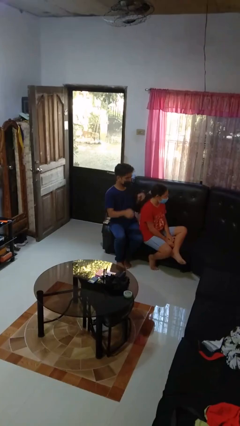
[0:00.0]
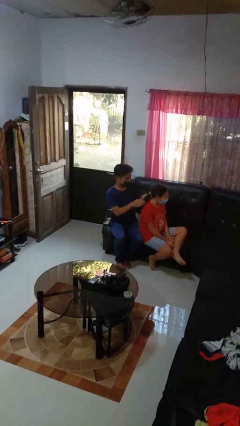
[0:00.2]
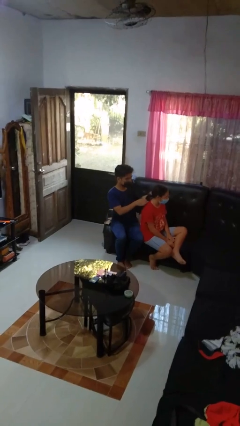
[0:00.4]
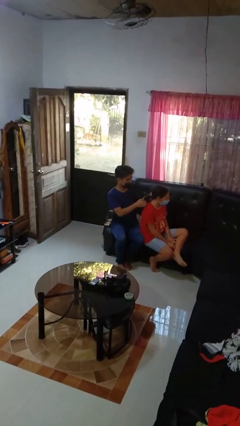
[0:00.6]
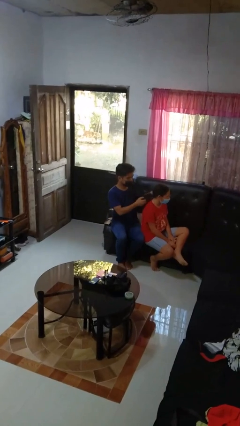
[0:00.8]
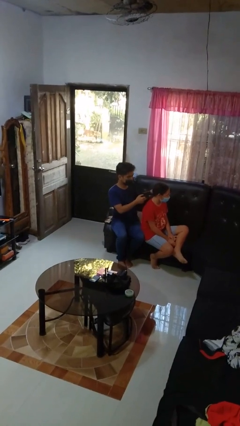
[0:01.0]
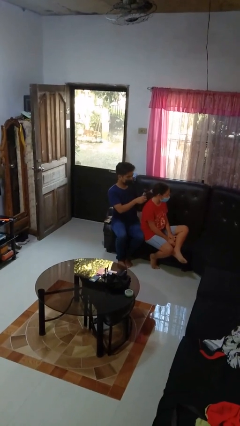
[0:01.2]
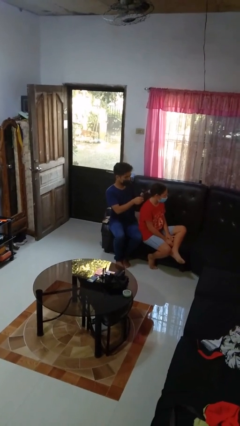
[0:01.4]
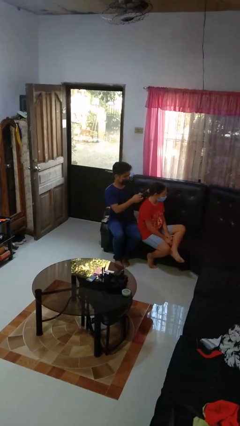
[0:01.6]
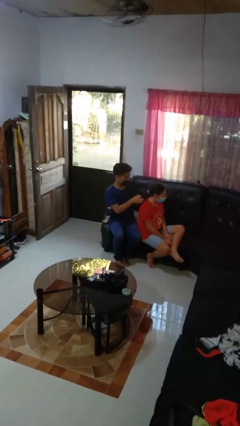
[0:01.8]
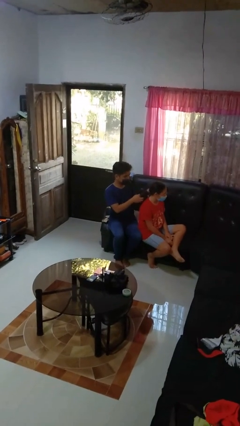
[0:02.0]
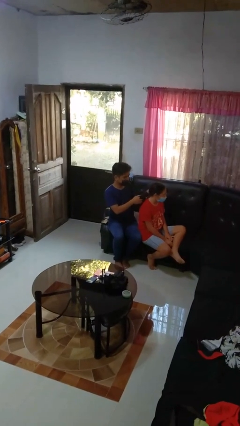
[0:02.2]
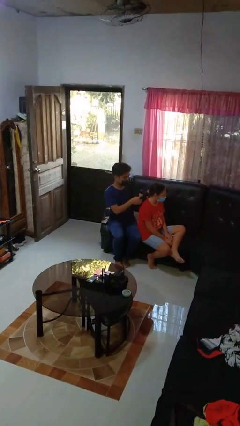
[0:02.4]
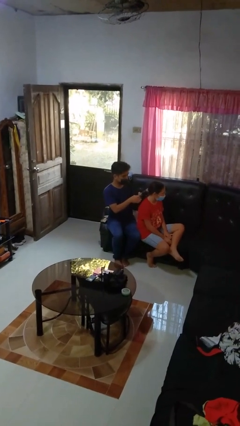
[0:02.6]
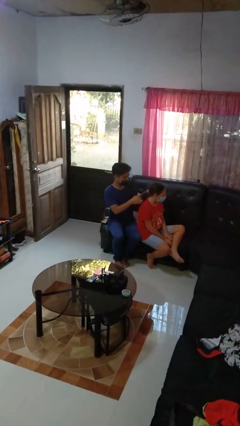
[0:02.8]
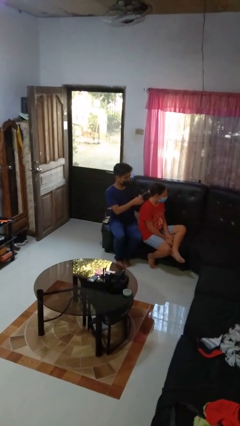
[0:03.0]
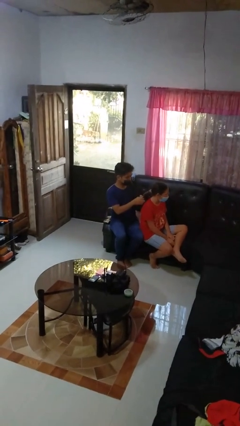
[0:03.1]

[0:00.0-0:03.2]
person braids hair of person

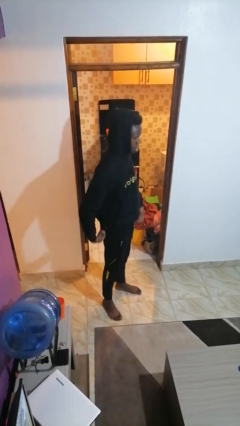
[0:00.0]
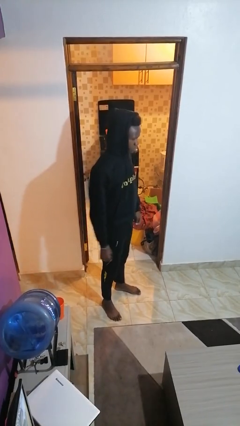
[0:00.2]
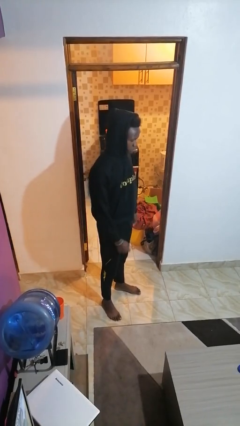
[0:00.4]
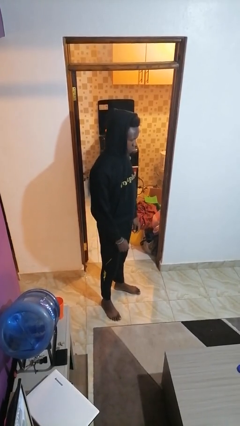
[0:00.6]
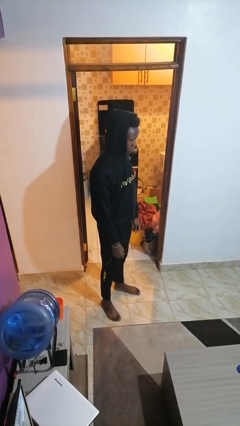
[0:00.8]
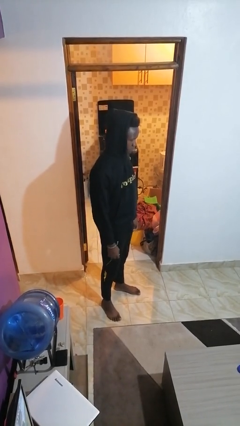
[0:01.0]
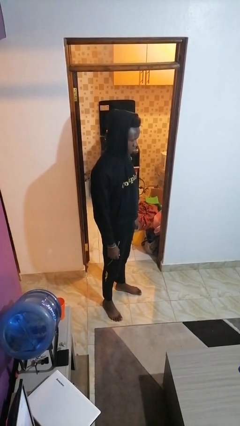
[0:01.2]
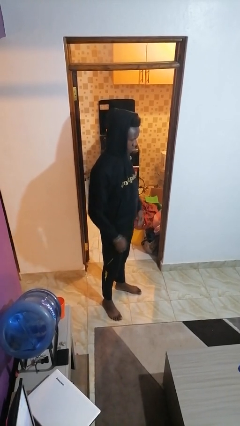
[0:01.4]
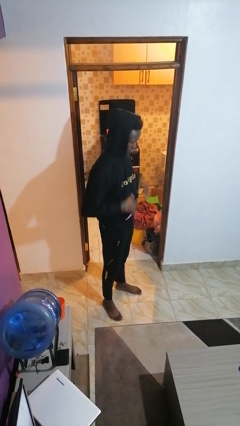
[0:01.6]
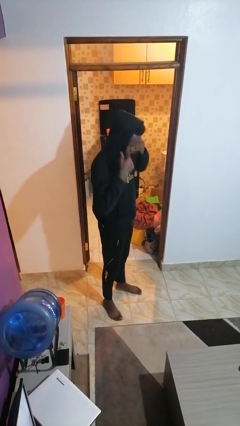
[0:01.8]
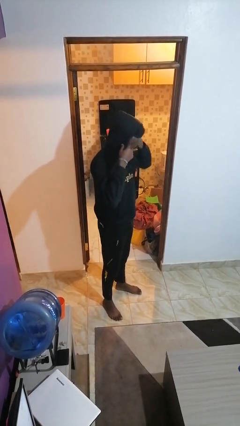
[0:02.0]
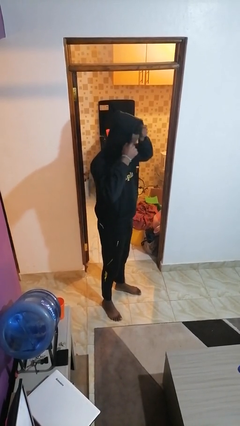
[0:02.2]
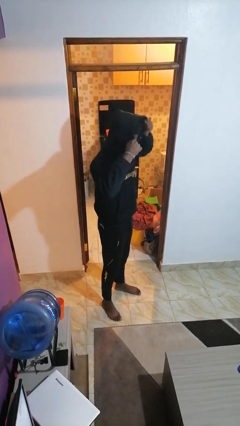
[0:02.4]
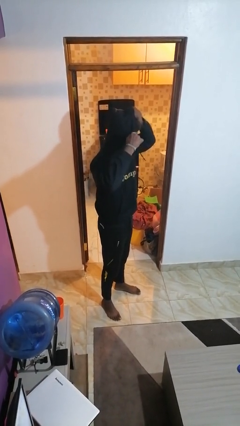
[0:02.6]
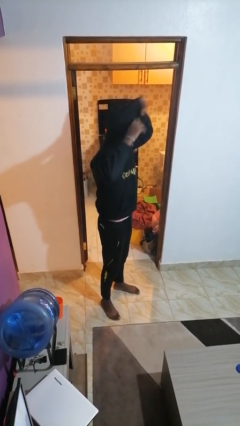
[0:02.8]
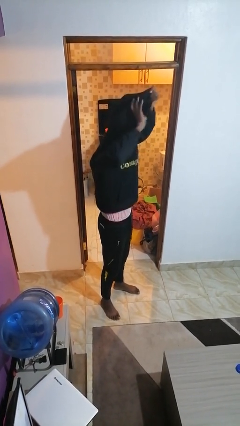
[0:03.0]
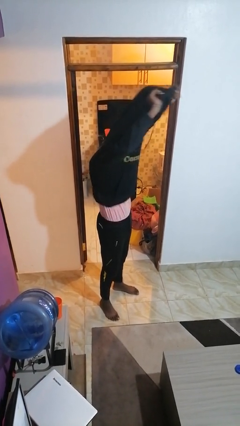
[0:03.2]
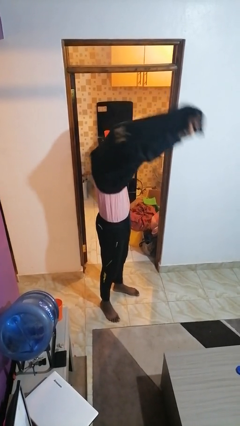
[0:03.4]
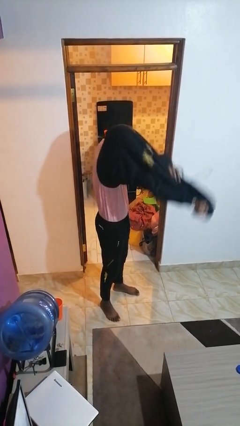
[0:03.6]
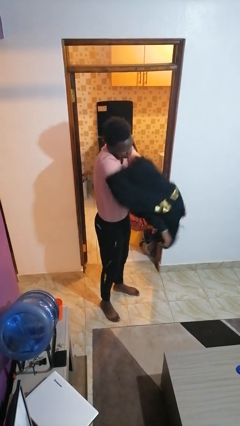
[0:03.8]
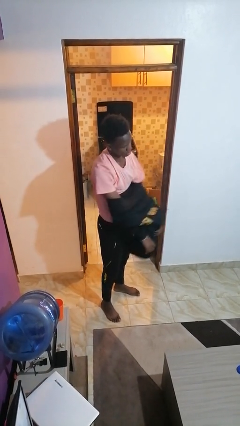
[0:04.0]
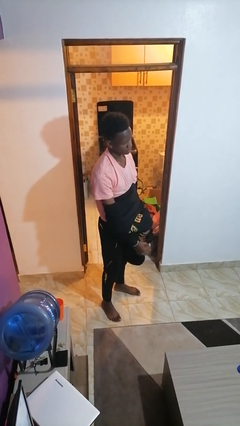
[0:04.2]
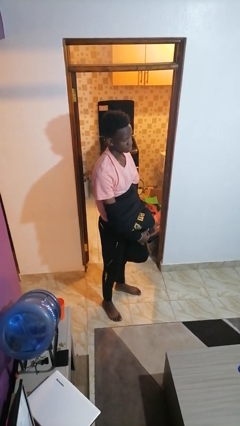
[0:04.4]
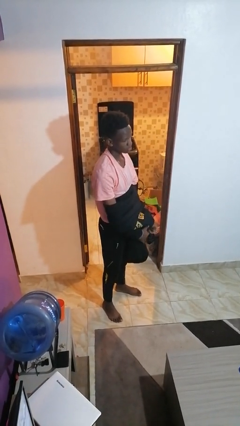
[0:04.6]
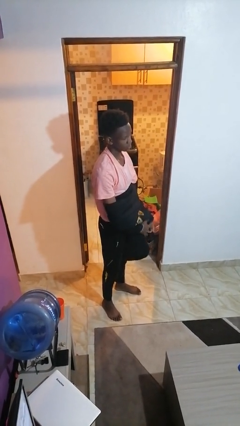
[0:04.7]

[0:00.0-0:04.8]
person takes off hoodie

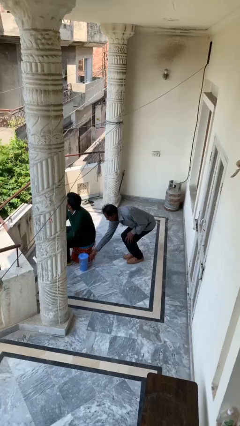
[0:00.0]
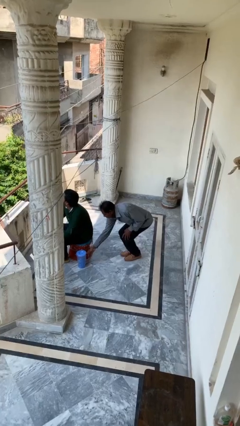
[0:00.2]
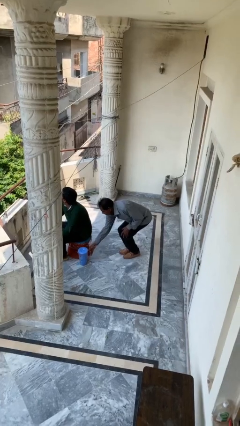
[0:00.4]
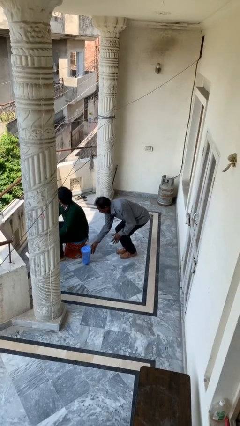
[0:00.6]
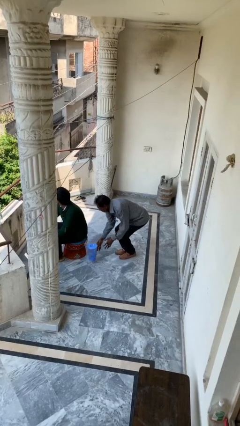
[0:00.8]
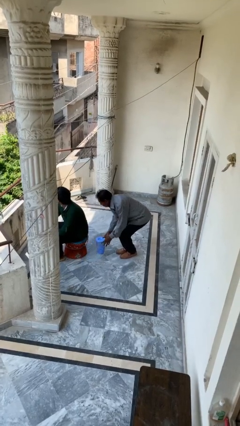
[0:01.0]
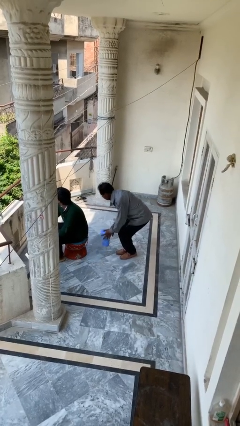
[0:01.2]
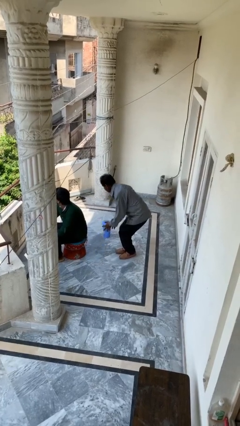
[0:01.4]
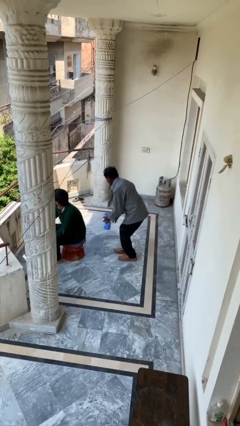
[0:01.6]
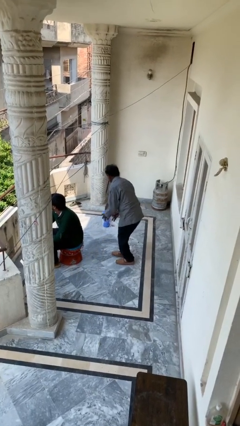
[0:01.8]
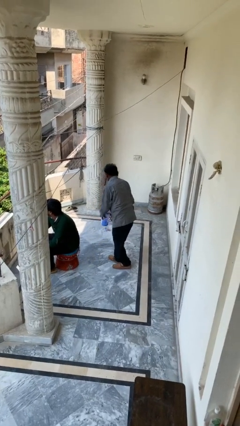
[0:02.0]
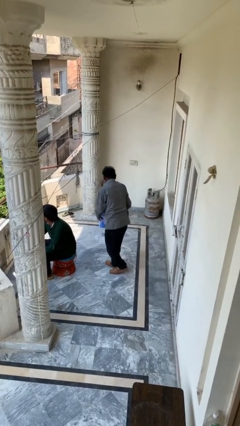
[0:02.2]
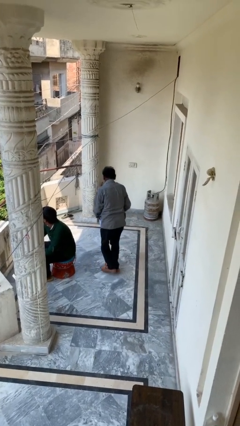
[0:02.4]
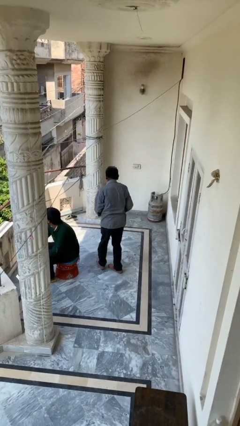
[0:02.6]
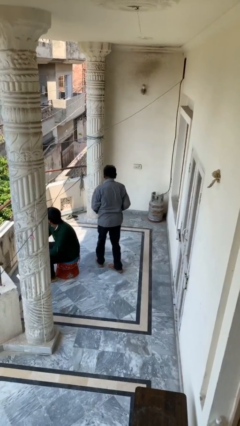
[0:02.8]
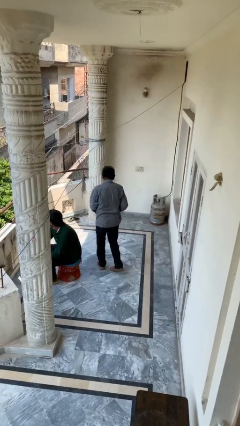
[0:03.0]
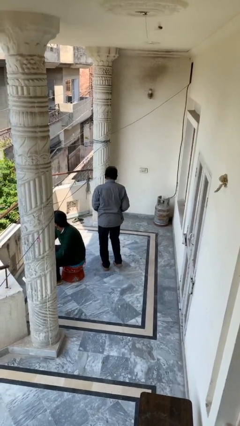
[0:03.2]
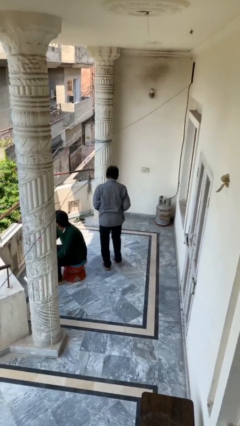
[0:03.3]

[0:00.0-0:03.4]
person steals object from person

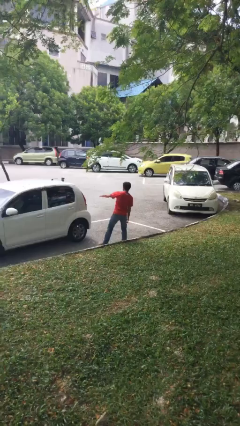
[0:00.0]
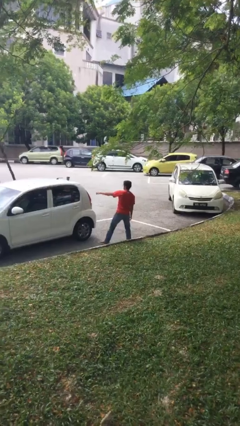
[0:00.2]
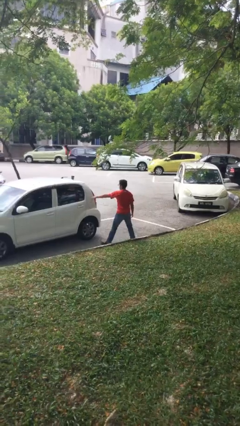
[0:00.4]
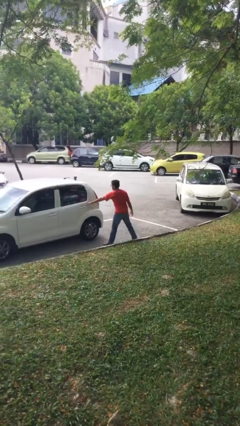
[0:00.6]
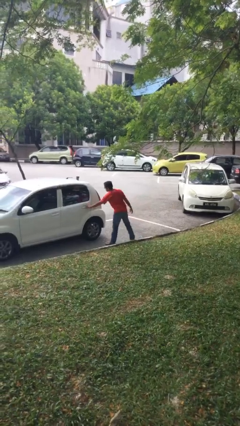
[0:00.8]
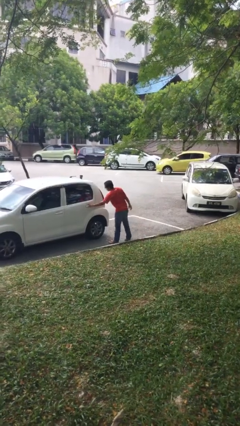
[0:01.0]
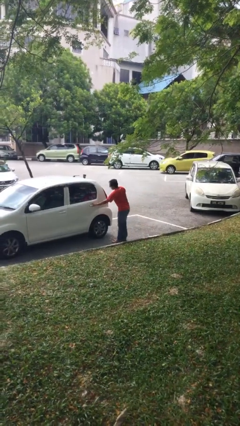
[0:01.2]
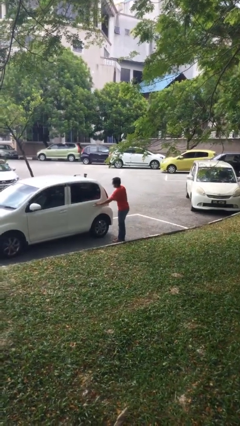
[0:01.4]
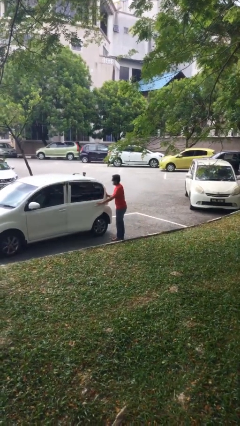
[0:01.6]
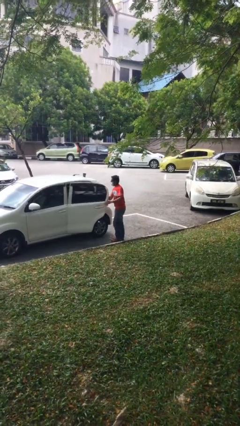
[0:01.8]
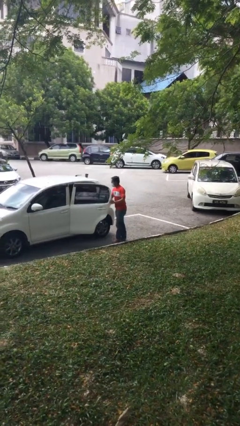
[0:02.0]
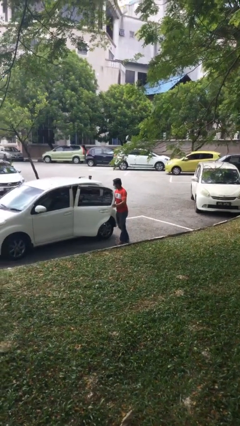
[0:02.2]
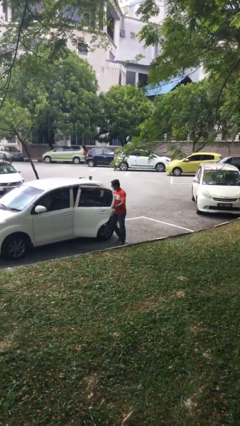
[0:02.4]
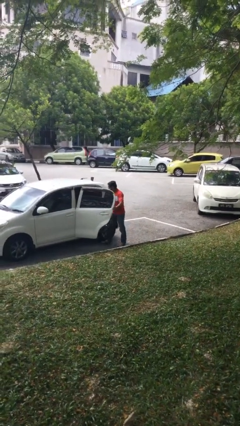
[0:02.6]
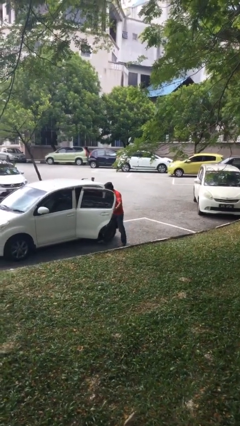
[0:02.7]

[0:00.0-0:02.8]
person opens car door

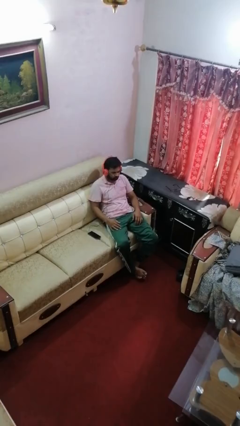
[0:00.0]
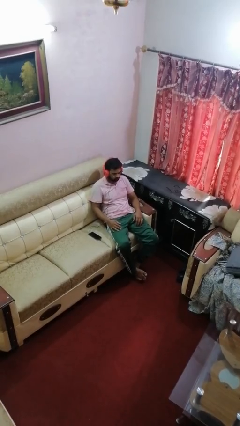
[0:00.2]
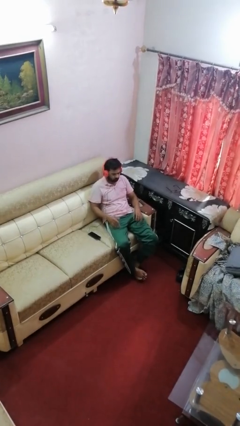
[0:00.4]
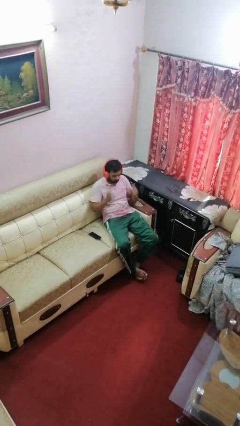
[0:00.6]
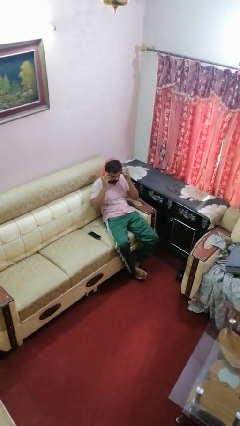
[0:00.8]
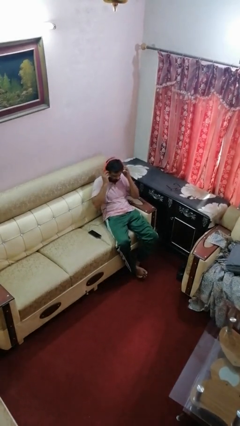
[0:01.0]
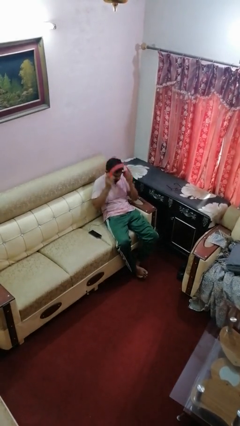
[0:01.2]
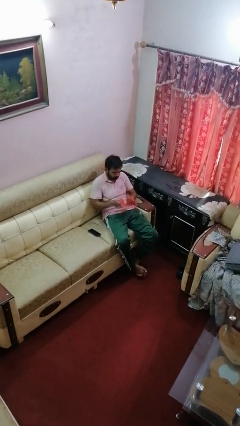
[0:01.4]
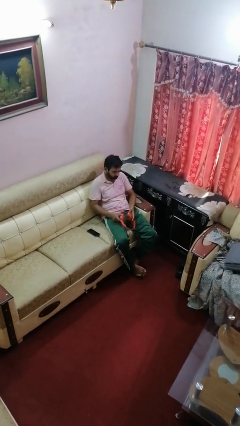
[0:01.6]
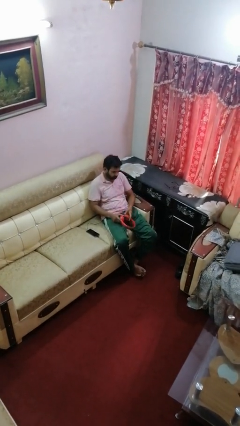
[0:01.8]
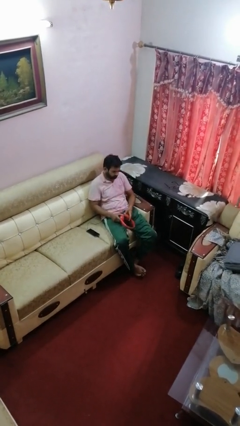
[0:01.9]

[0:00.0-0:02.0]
person takes off headphones

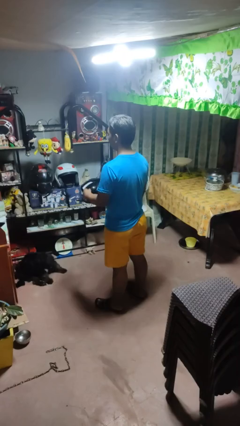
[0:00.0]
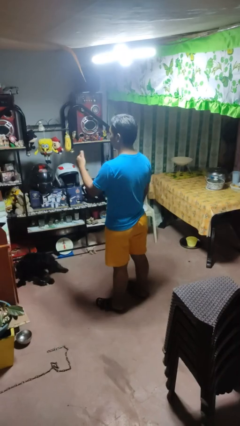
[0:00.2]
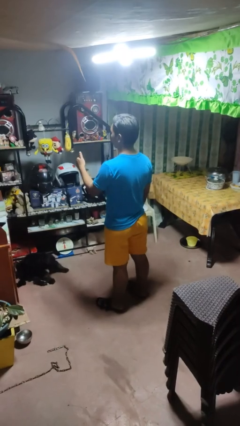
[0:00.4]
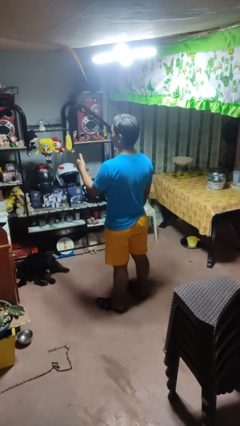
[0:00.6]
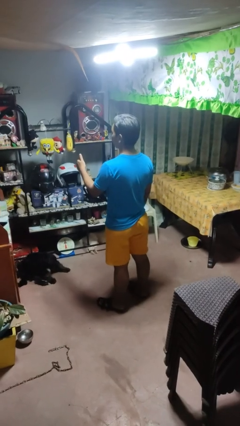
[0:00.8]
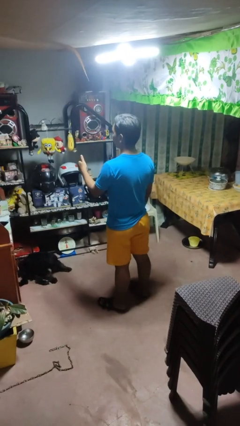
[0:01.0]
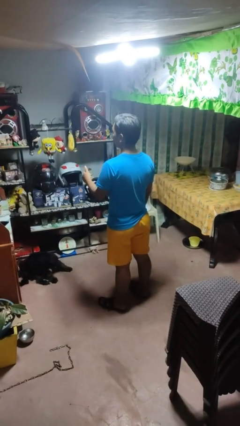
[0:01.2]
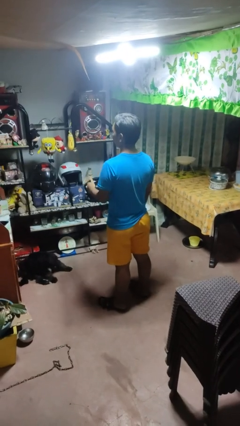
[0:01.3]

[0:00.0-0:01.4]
person gestures thumbs up

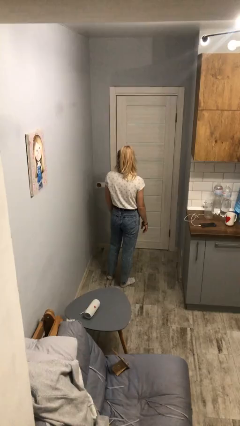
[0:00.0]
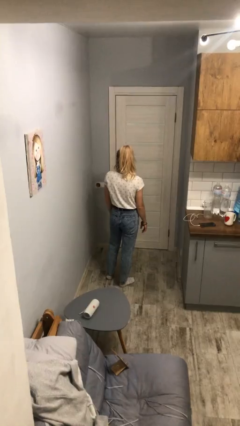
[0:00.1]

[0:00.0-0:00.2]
person stretches back
